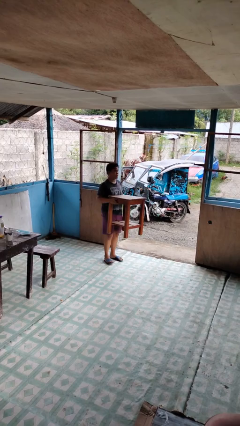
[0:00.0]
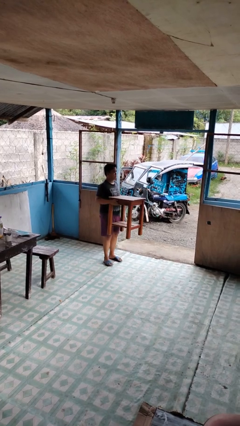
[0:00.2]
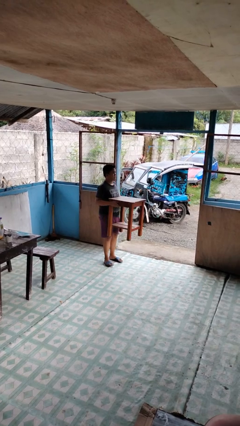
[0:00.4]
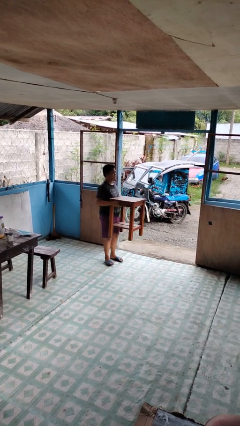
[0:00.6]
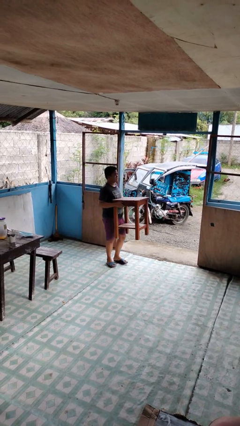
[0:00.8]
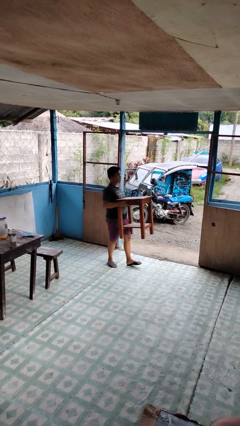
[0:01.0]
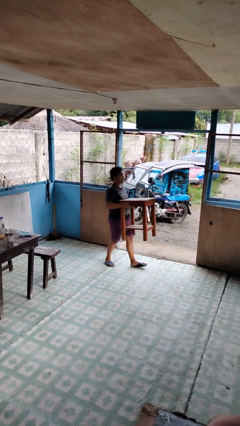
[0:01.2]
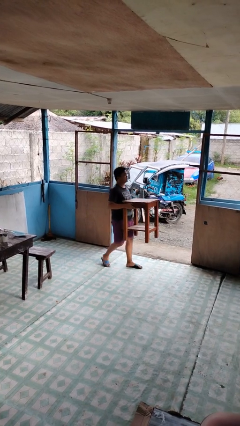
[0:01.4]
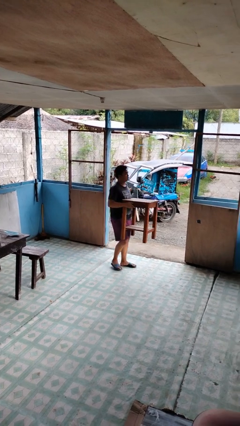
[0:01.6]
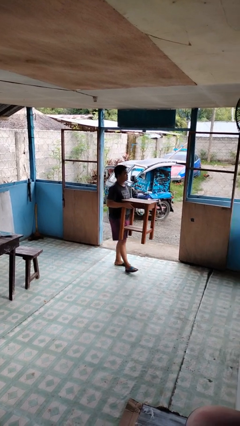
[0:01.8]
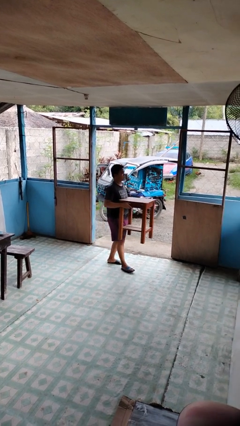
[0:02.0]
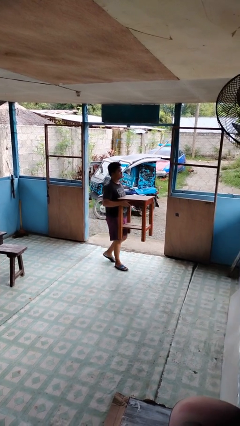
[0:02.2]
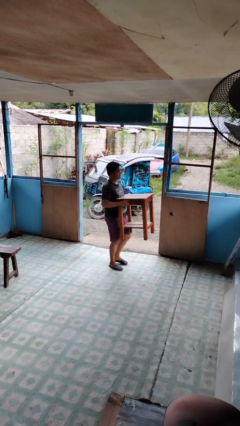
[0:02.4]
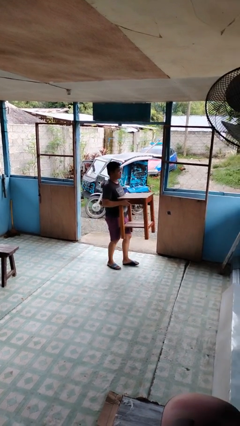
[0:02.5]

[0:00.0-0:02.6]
person carries furniture

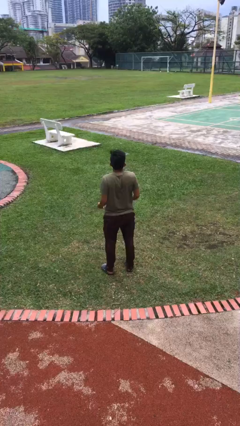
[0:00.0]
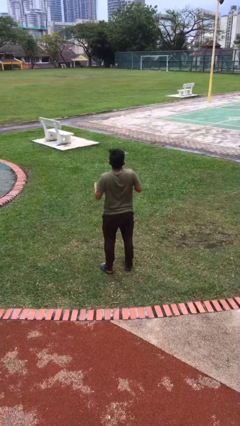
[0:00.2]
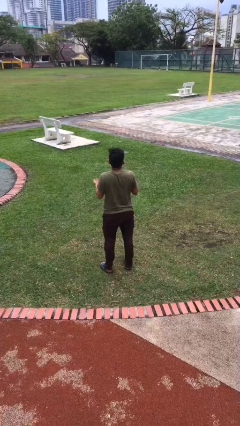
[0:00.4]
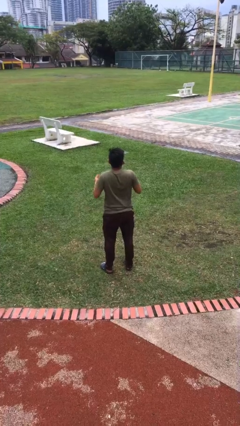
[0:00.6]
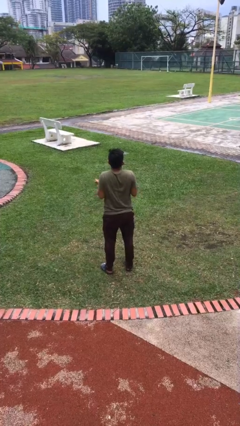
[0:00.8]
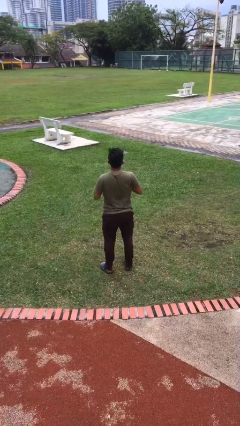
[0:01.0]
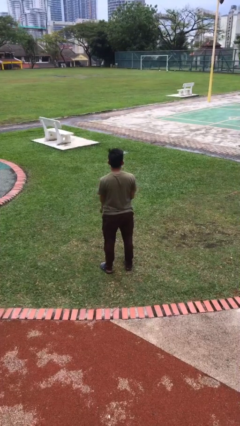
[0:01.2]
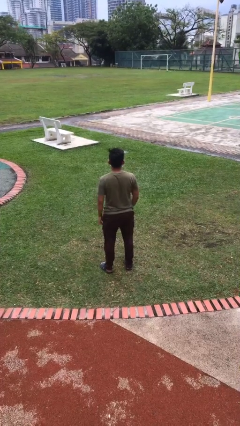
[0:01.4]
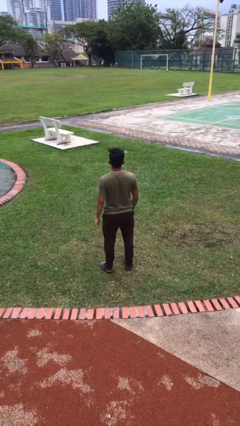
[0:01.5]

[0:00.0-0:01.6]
person shrugs

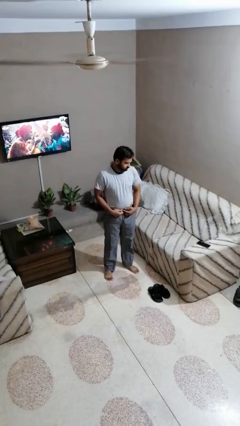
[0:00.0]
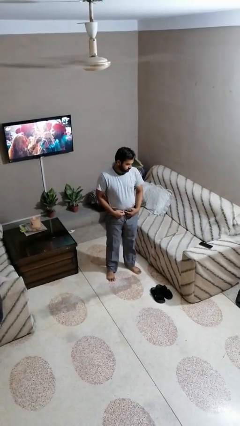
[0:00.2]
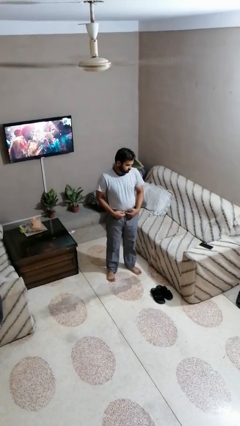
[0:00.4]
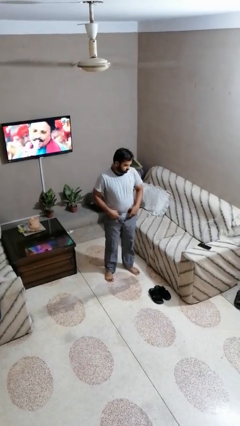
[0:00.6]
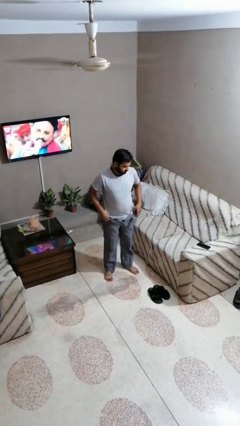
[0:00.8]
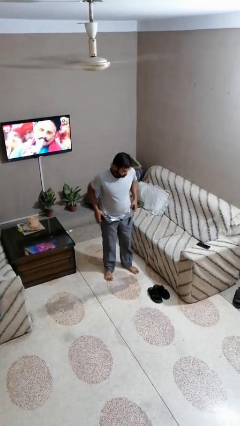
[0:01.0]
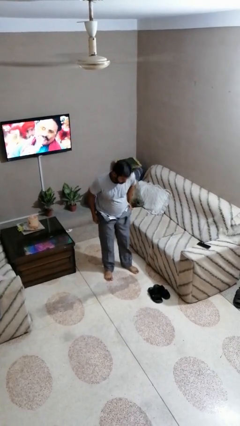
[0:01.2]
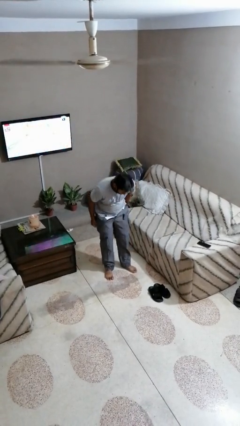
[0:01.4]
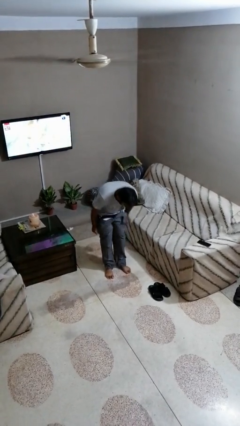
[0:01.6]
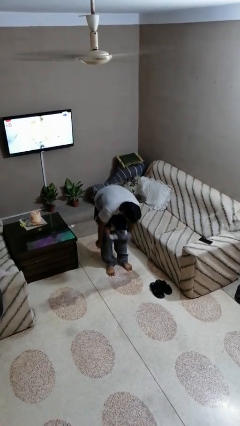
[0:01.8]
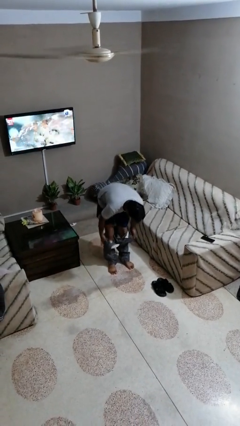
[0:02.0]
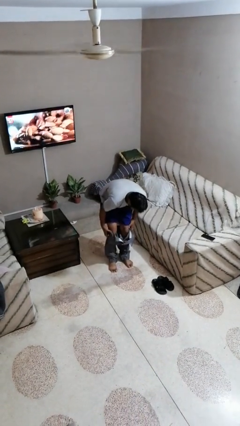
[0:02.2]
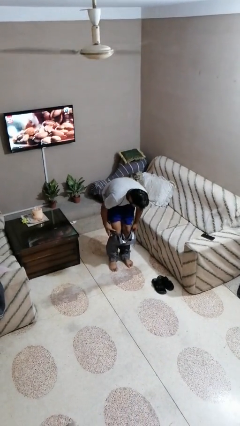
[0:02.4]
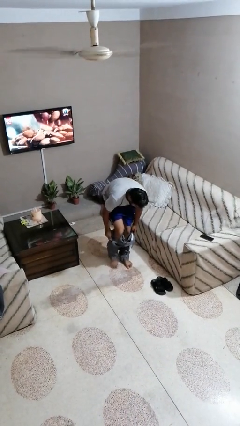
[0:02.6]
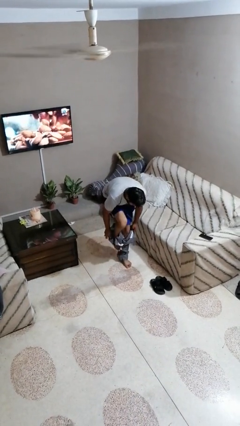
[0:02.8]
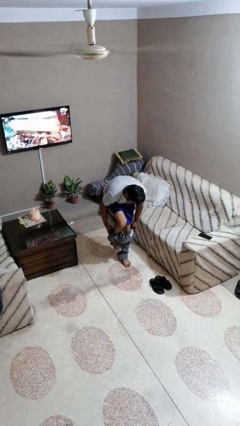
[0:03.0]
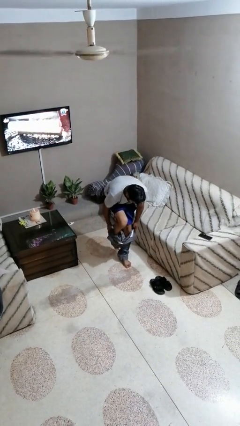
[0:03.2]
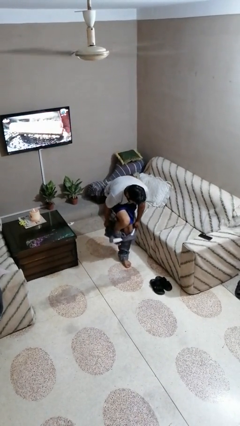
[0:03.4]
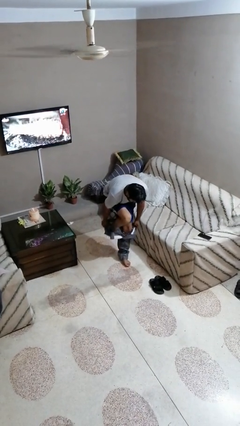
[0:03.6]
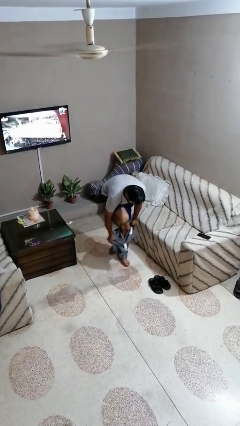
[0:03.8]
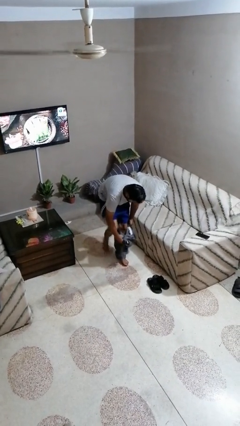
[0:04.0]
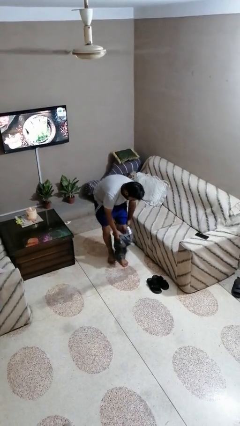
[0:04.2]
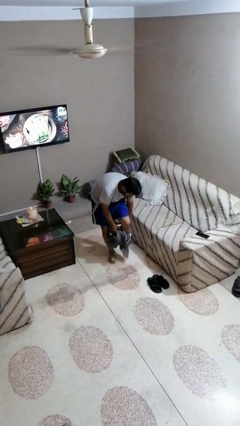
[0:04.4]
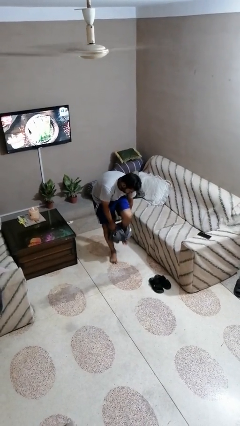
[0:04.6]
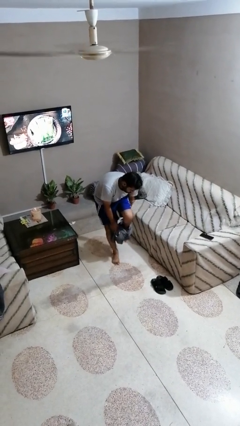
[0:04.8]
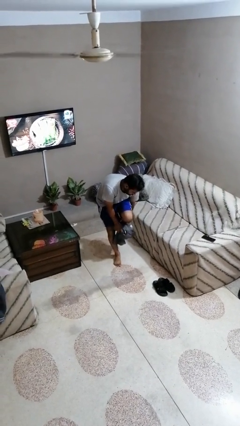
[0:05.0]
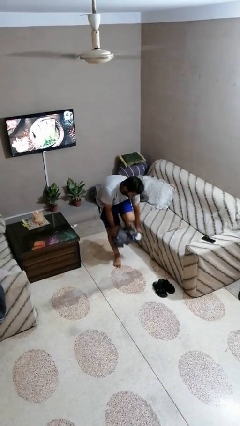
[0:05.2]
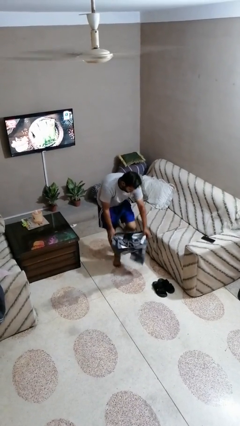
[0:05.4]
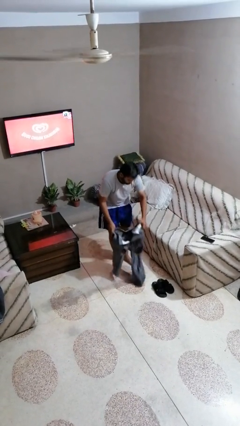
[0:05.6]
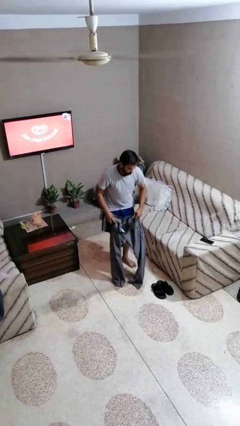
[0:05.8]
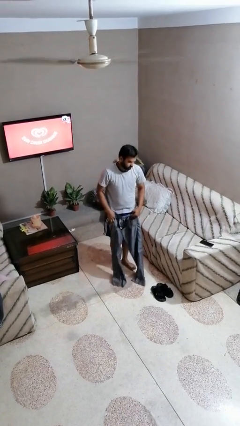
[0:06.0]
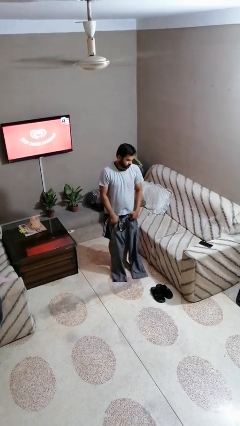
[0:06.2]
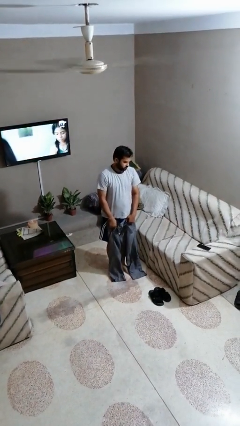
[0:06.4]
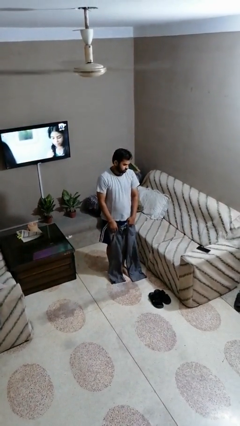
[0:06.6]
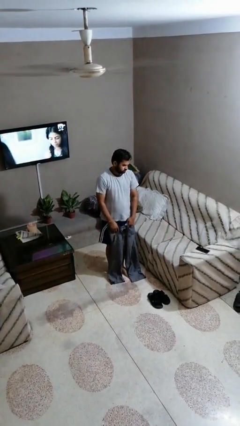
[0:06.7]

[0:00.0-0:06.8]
person takes off pants

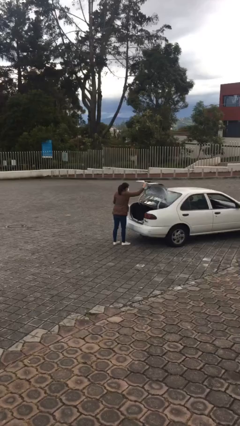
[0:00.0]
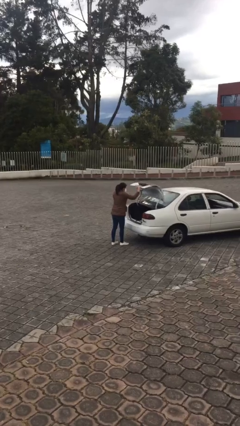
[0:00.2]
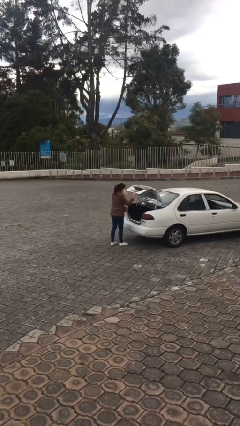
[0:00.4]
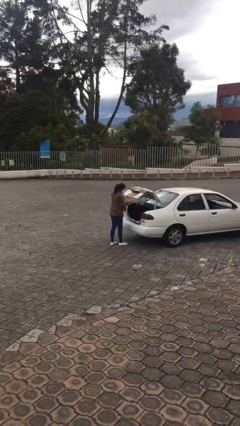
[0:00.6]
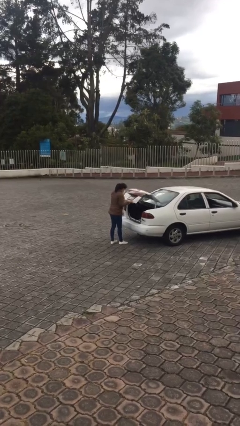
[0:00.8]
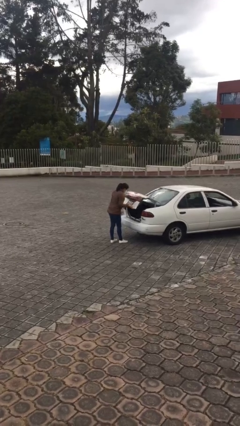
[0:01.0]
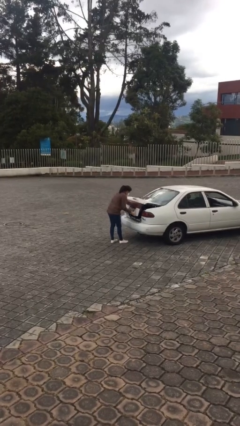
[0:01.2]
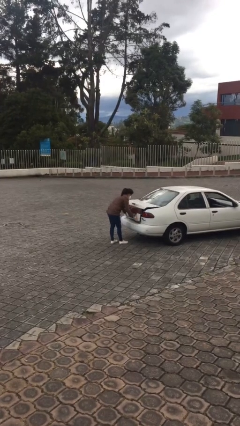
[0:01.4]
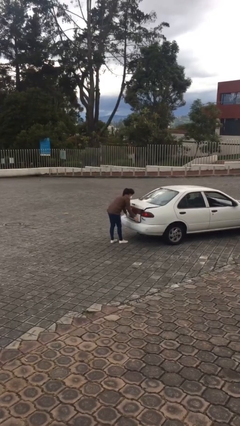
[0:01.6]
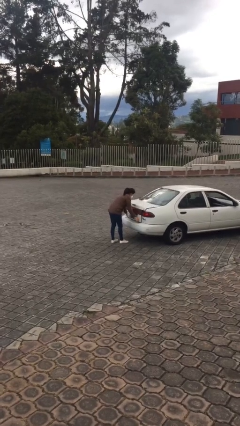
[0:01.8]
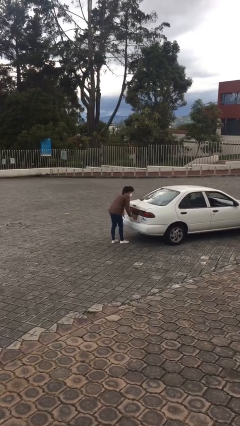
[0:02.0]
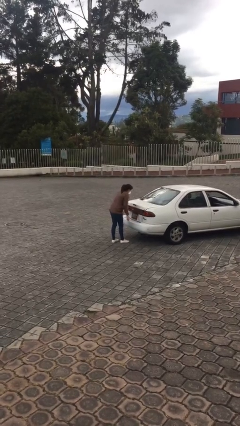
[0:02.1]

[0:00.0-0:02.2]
person closes car trunk

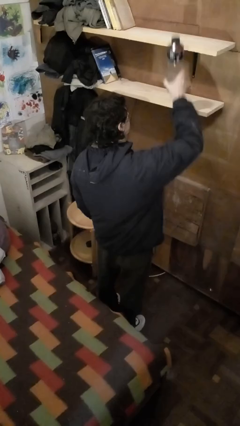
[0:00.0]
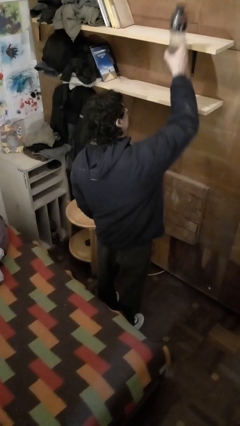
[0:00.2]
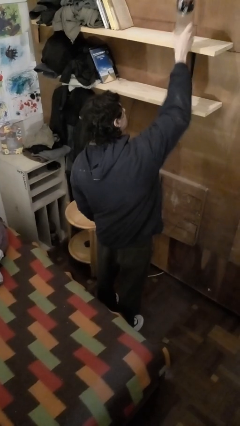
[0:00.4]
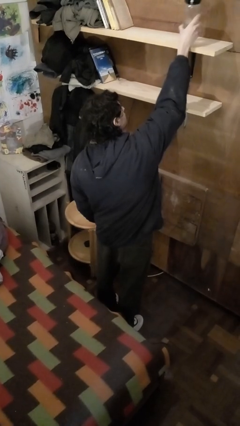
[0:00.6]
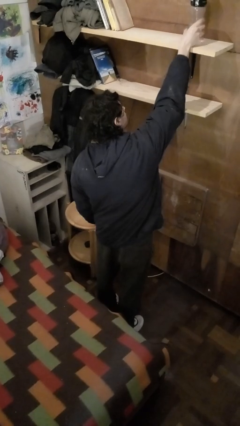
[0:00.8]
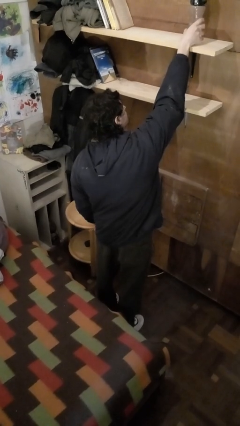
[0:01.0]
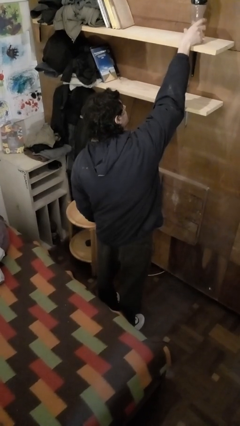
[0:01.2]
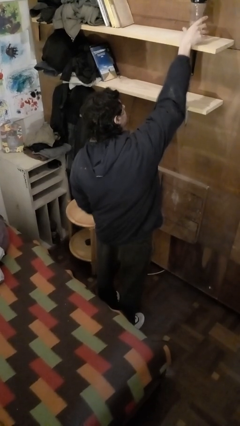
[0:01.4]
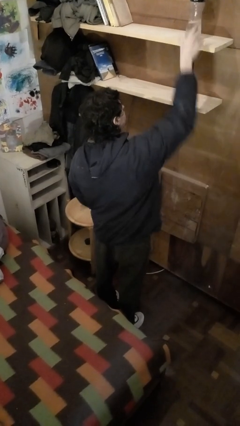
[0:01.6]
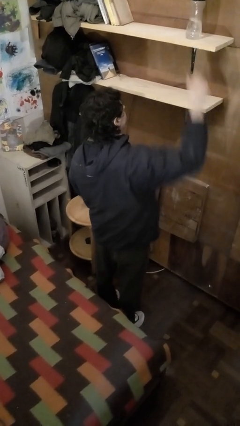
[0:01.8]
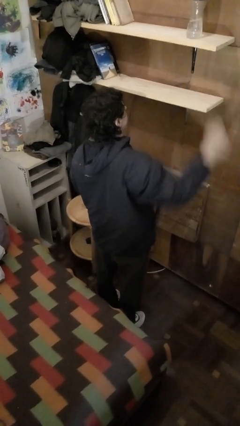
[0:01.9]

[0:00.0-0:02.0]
person puts down object on shelf

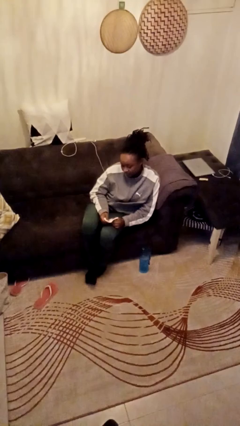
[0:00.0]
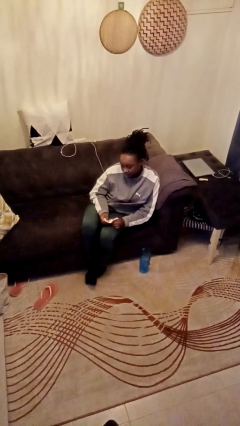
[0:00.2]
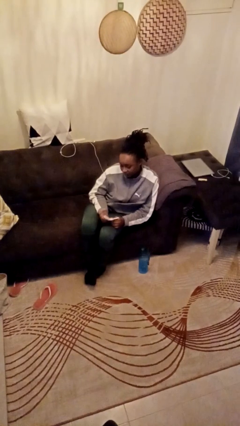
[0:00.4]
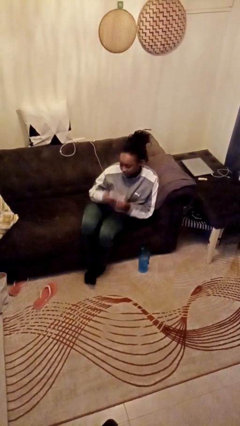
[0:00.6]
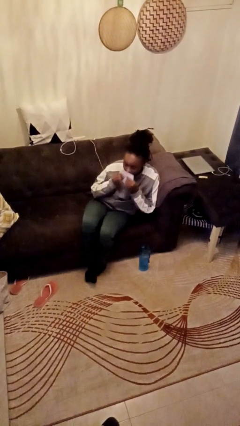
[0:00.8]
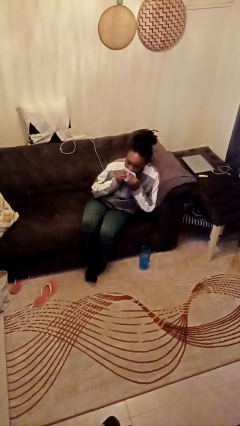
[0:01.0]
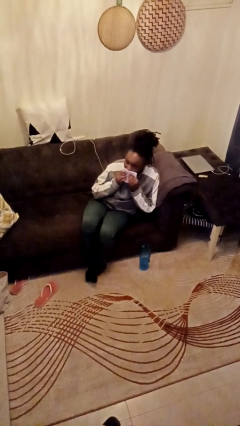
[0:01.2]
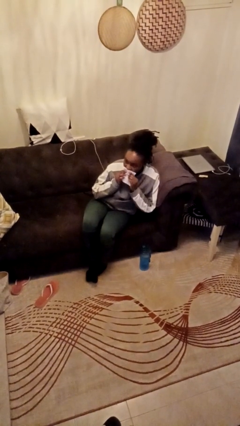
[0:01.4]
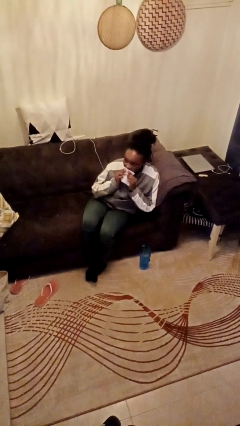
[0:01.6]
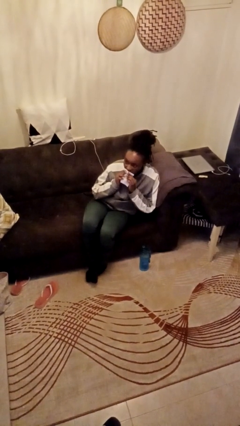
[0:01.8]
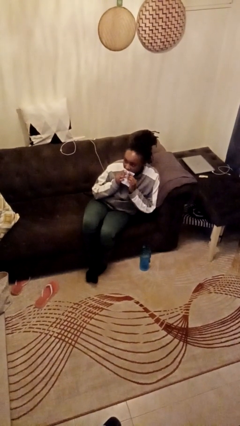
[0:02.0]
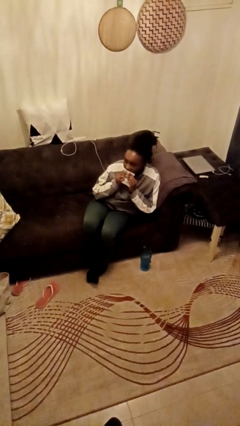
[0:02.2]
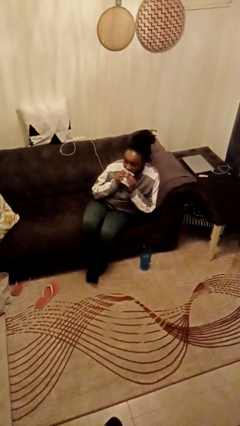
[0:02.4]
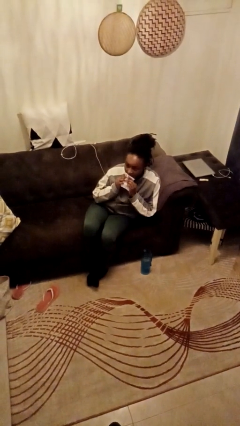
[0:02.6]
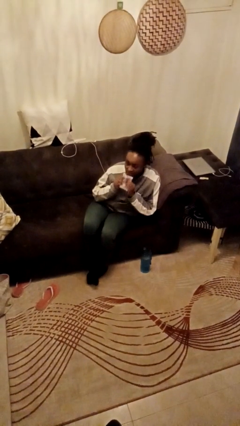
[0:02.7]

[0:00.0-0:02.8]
person wipes mouth with napkin
